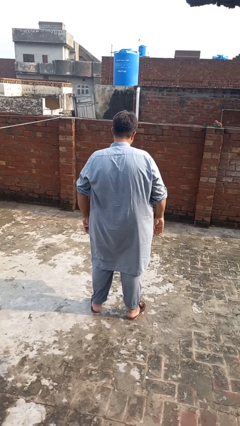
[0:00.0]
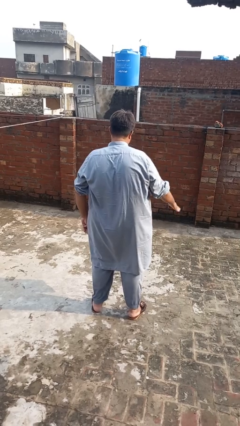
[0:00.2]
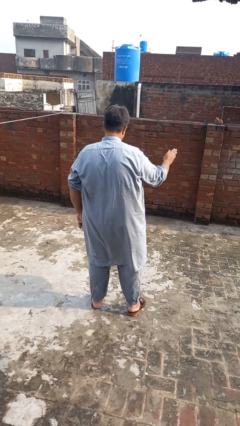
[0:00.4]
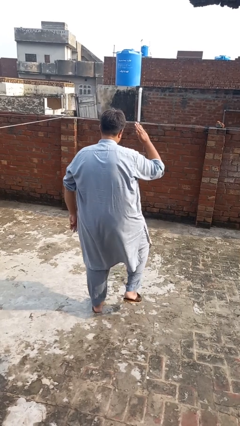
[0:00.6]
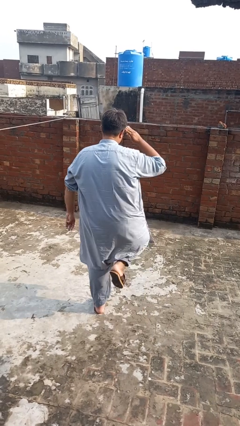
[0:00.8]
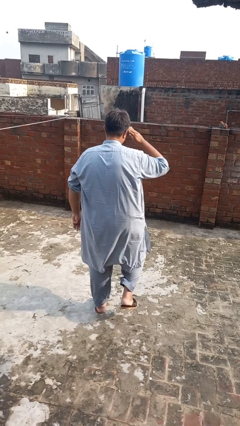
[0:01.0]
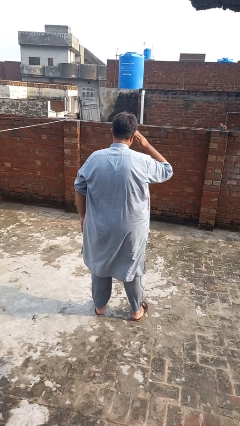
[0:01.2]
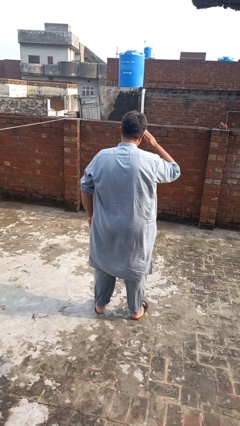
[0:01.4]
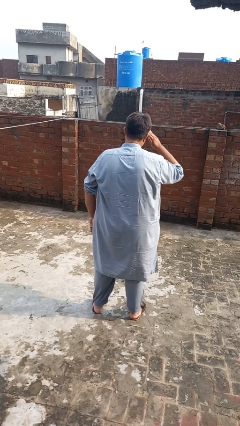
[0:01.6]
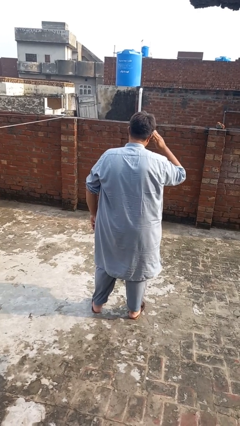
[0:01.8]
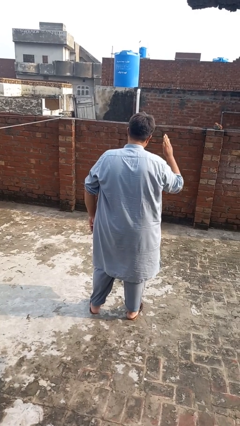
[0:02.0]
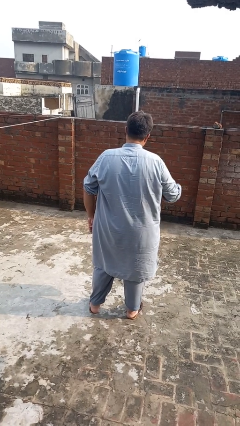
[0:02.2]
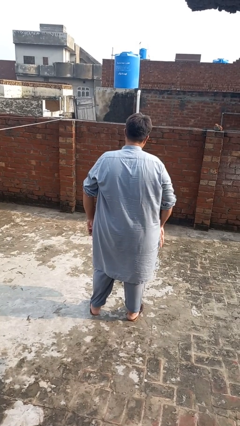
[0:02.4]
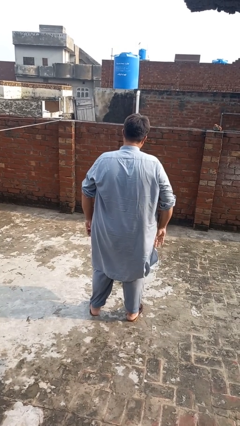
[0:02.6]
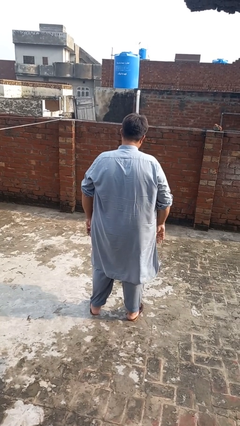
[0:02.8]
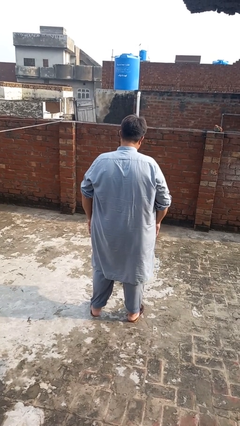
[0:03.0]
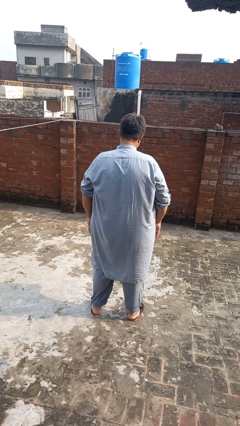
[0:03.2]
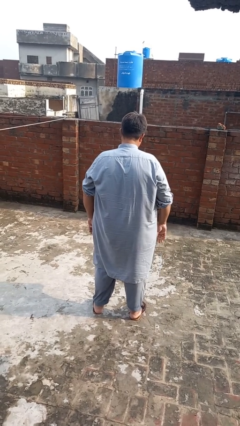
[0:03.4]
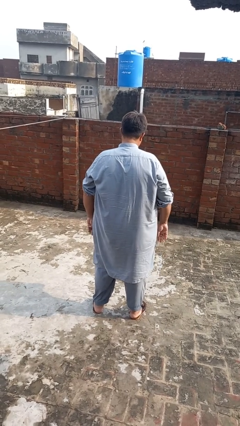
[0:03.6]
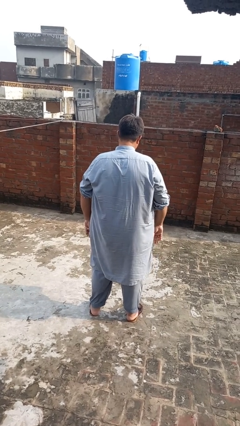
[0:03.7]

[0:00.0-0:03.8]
person salutes

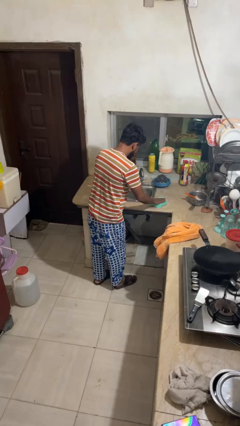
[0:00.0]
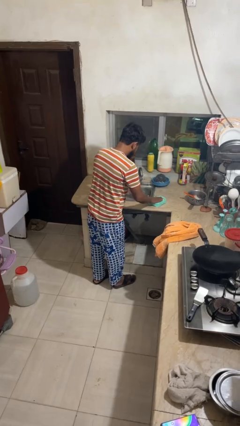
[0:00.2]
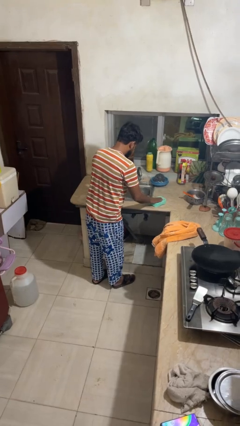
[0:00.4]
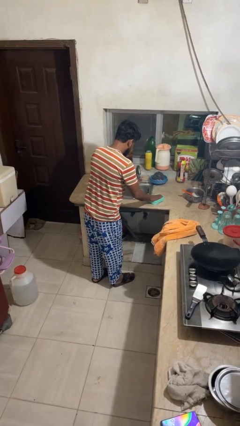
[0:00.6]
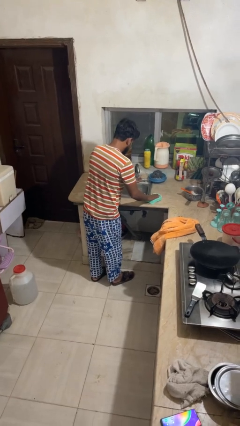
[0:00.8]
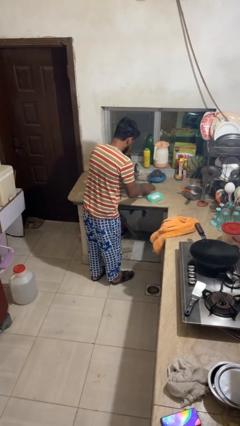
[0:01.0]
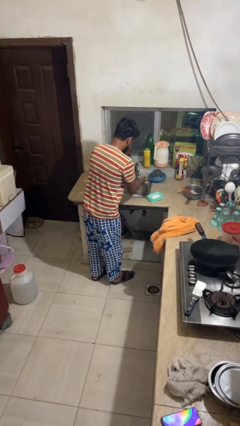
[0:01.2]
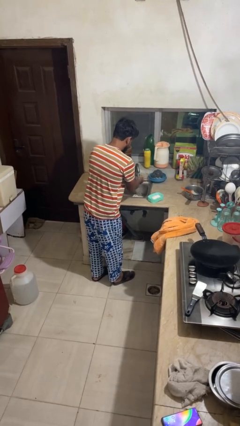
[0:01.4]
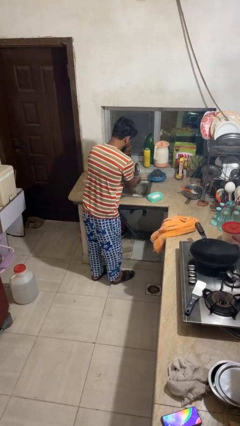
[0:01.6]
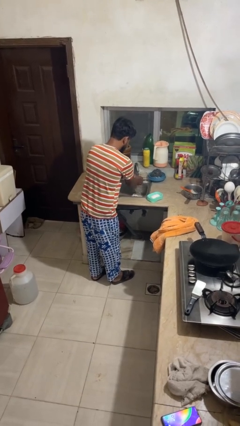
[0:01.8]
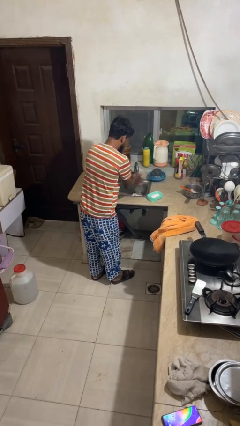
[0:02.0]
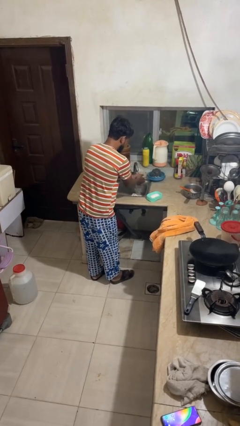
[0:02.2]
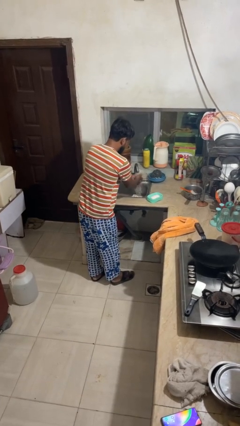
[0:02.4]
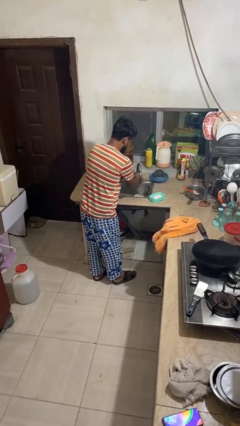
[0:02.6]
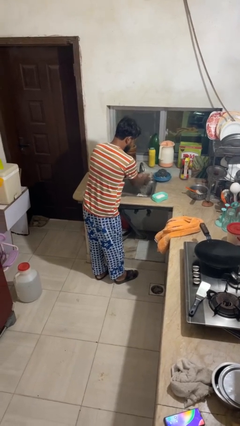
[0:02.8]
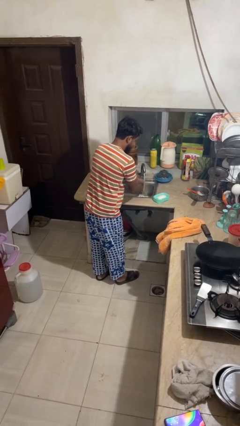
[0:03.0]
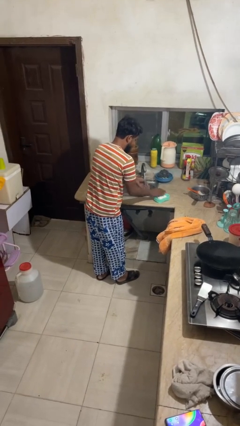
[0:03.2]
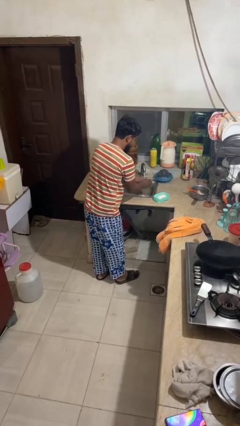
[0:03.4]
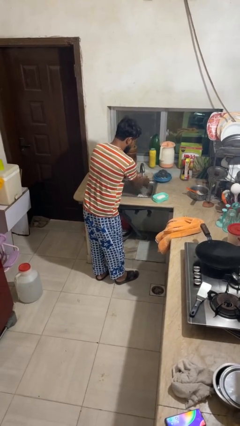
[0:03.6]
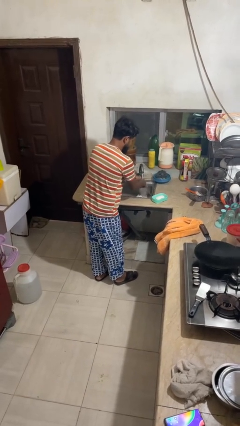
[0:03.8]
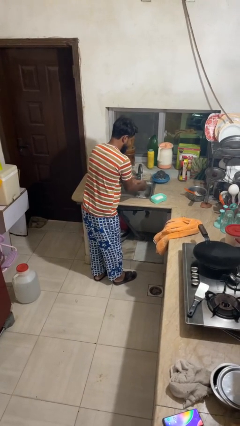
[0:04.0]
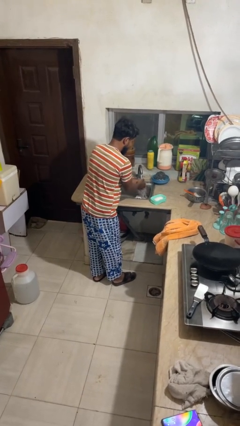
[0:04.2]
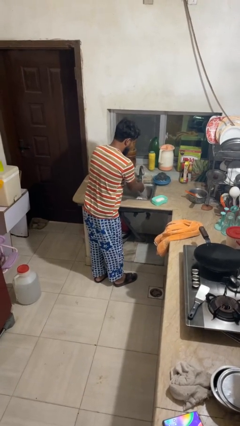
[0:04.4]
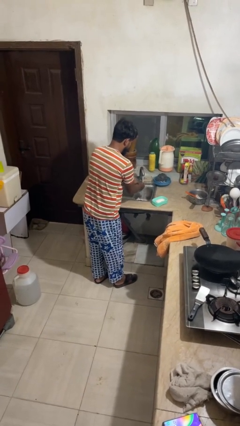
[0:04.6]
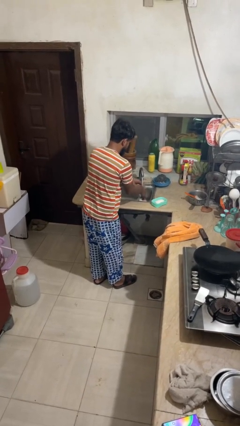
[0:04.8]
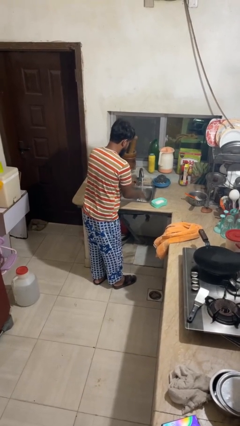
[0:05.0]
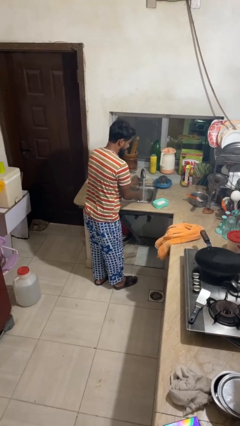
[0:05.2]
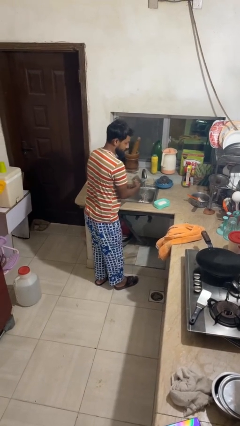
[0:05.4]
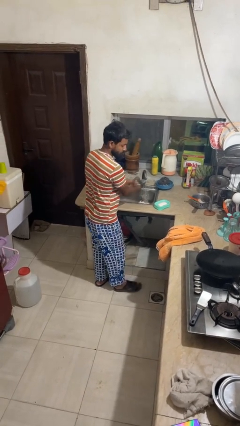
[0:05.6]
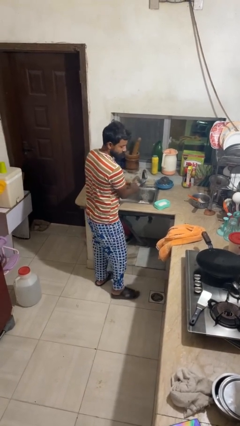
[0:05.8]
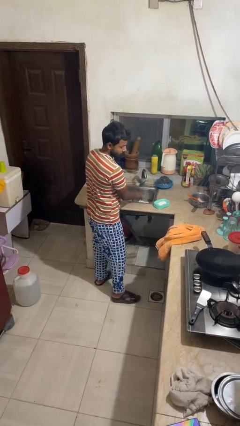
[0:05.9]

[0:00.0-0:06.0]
person washes hands

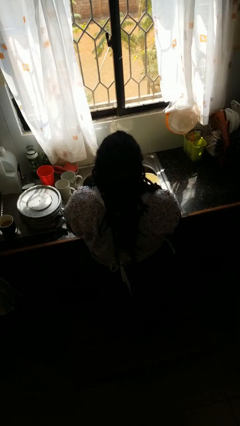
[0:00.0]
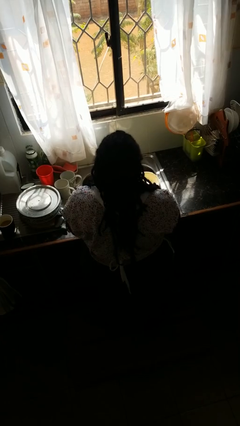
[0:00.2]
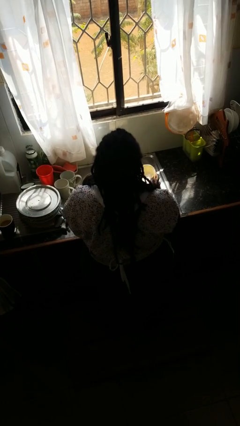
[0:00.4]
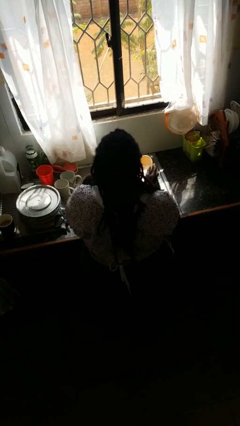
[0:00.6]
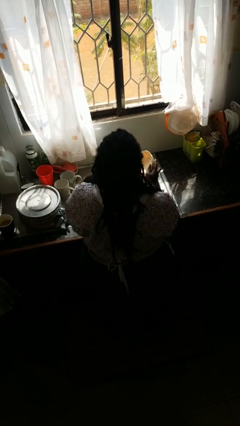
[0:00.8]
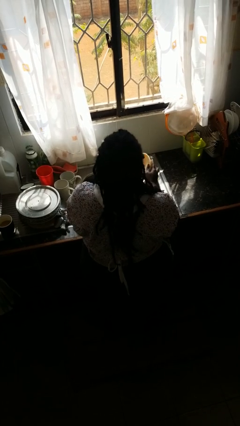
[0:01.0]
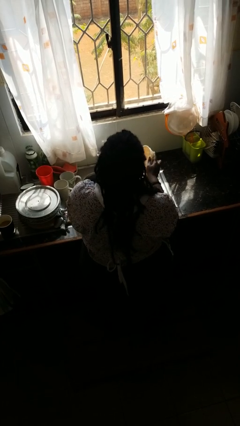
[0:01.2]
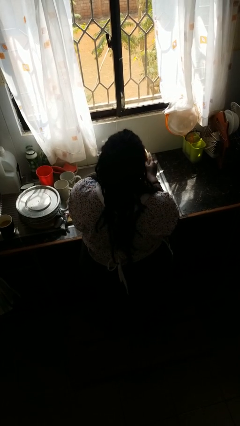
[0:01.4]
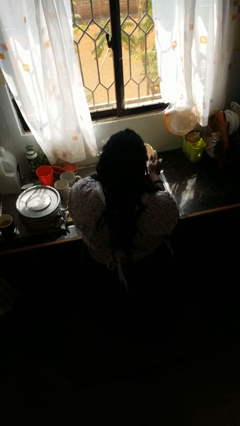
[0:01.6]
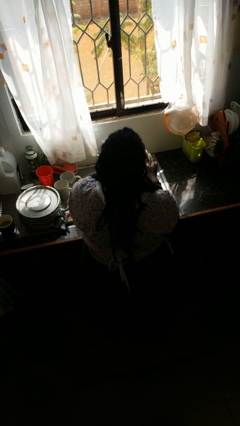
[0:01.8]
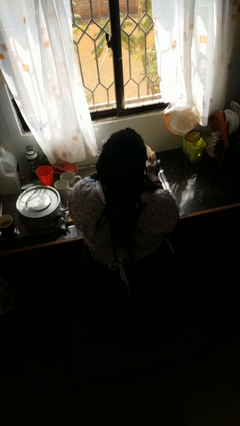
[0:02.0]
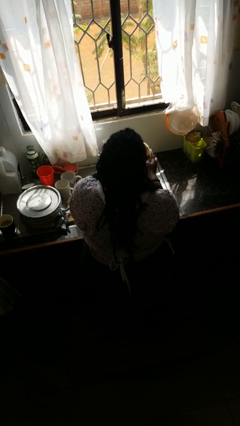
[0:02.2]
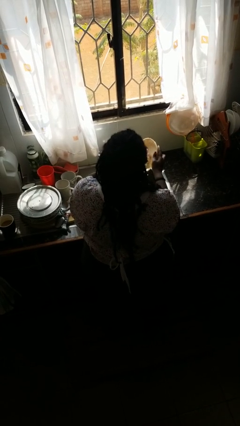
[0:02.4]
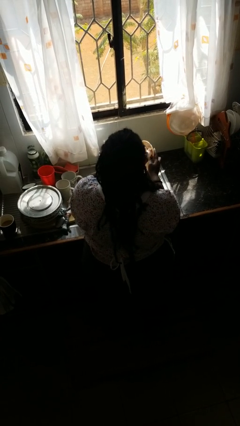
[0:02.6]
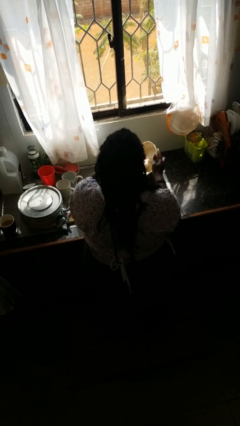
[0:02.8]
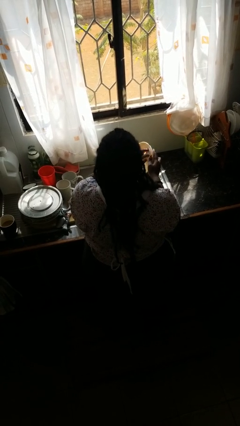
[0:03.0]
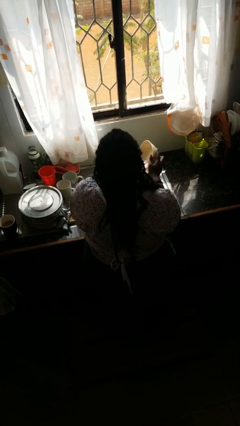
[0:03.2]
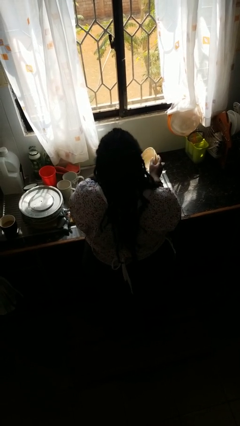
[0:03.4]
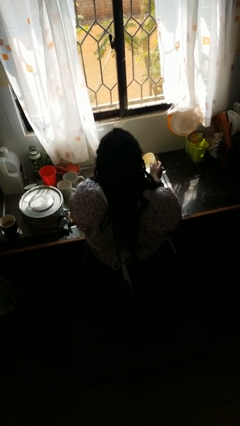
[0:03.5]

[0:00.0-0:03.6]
person washes dish

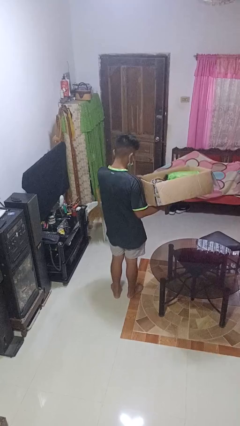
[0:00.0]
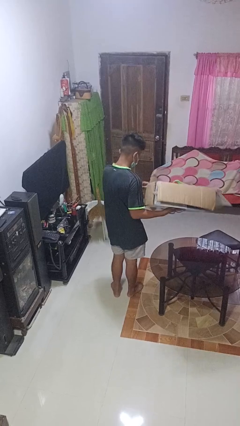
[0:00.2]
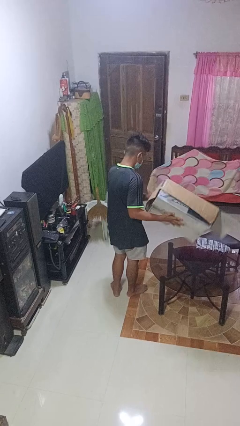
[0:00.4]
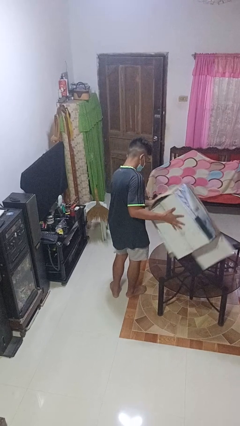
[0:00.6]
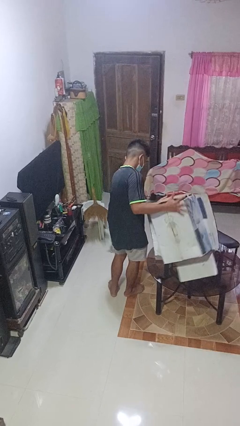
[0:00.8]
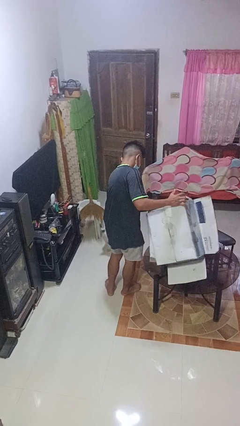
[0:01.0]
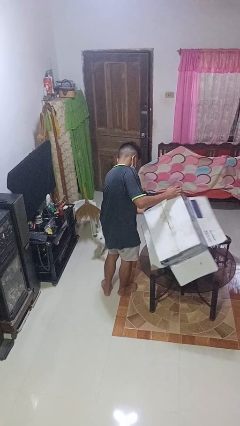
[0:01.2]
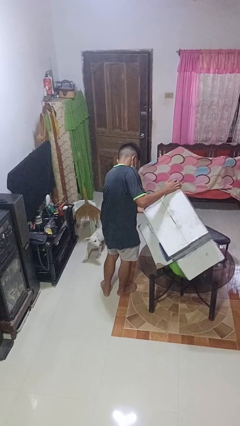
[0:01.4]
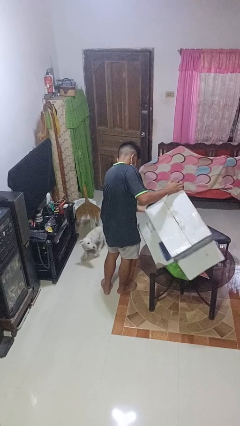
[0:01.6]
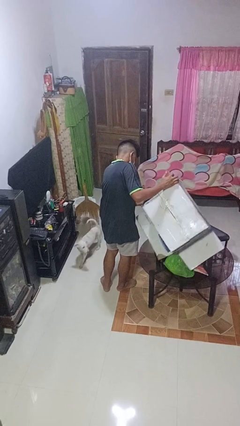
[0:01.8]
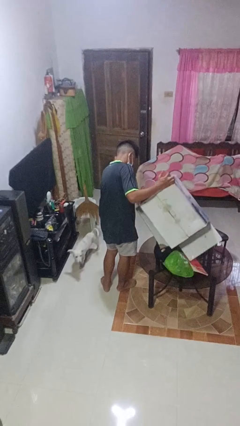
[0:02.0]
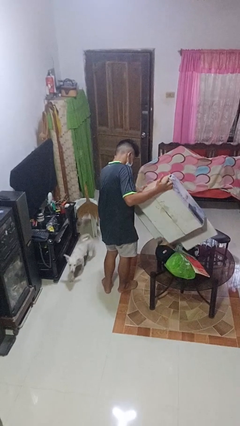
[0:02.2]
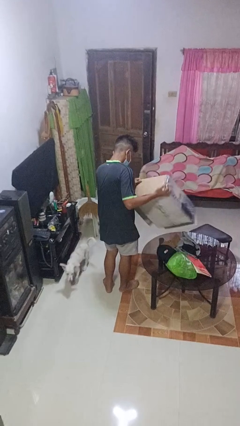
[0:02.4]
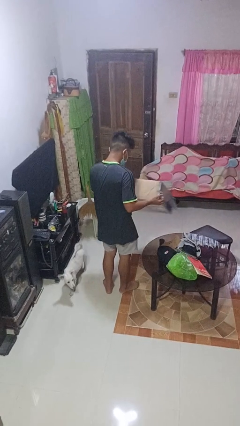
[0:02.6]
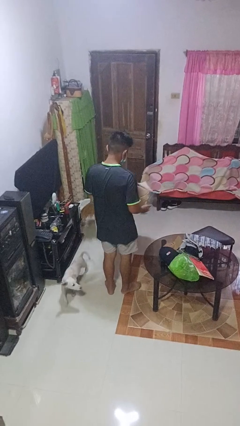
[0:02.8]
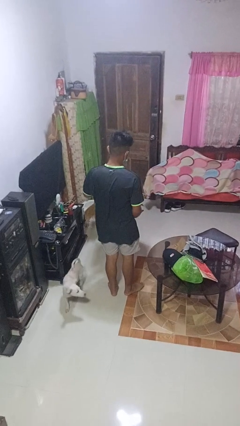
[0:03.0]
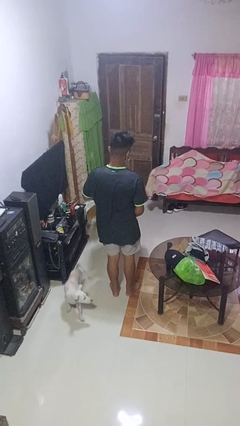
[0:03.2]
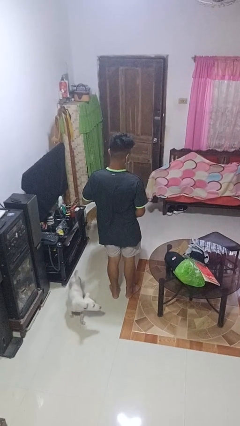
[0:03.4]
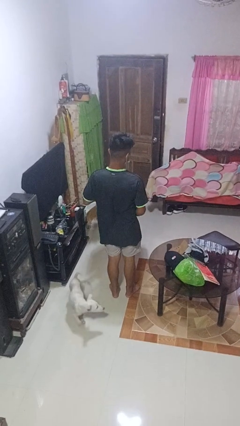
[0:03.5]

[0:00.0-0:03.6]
person unloads box onto table

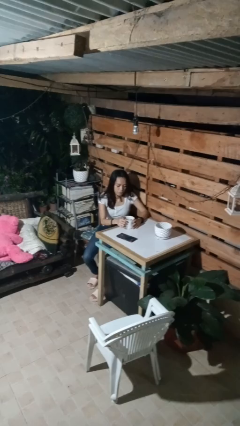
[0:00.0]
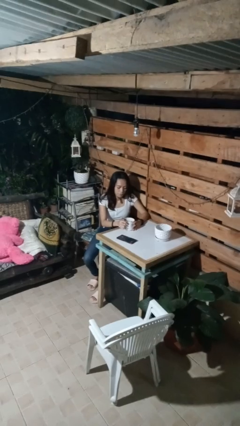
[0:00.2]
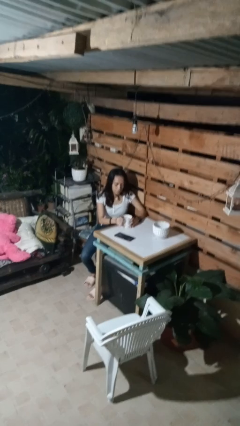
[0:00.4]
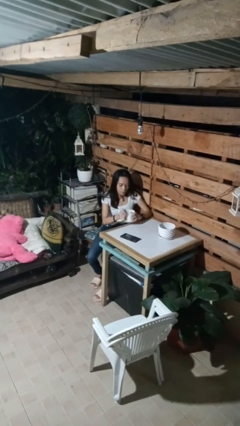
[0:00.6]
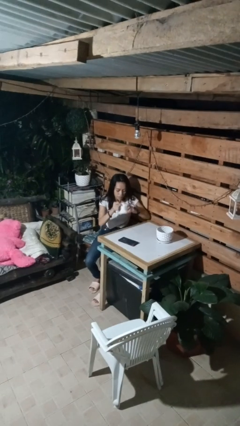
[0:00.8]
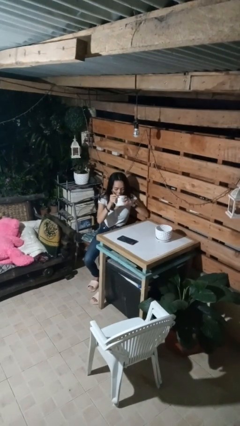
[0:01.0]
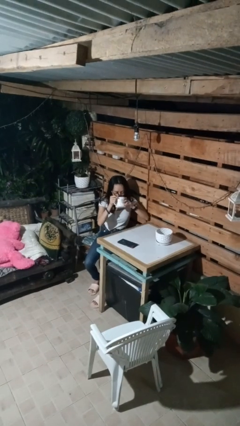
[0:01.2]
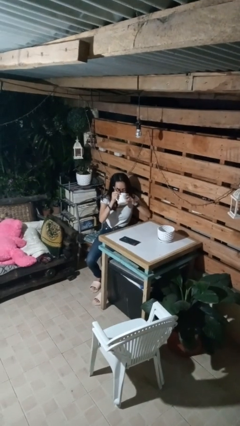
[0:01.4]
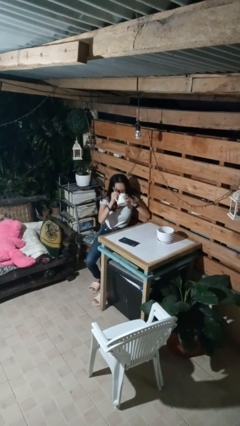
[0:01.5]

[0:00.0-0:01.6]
person drinks from mug
